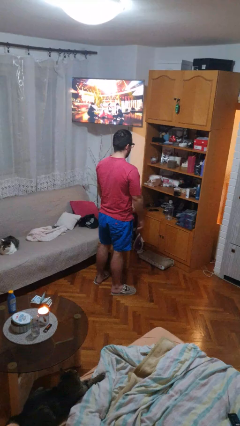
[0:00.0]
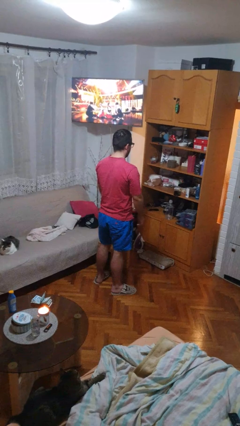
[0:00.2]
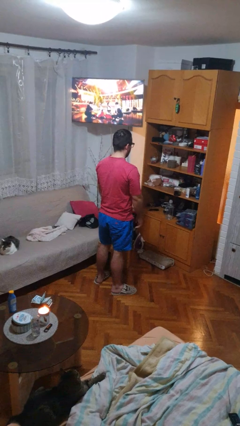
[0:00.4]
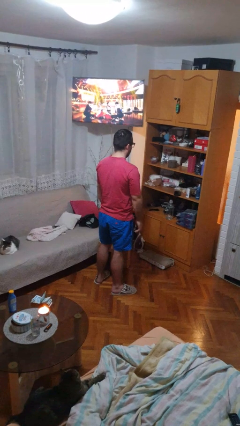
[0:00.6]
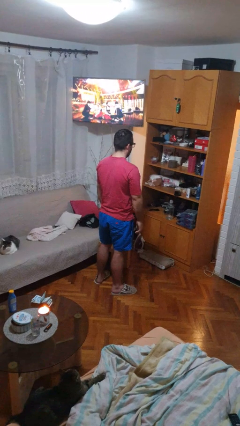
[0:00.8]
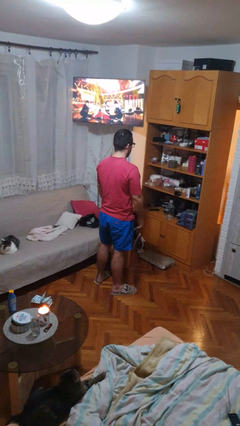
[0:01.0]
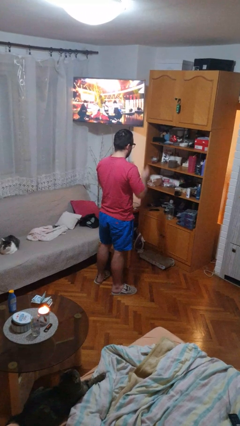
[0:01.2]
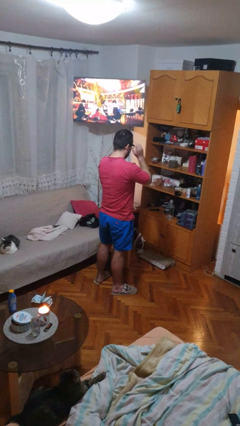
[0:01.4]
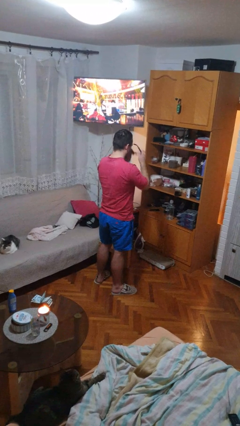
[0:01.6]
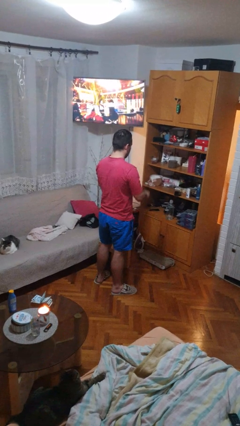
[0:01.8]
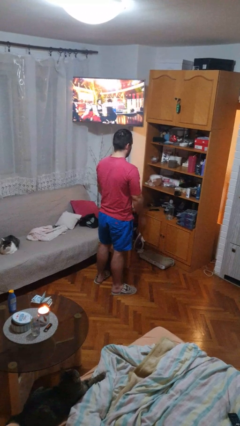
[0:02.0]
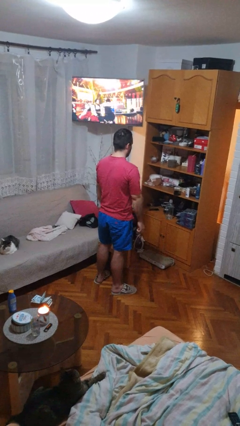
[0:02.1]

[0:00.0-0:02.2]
person takes off glasses

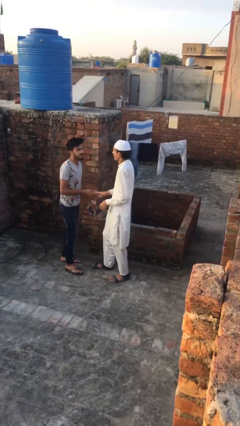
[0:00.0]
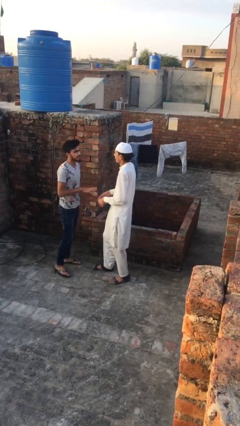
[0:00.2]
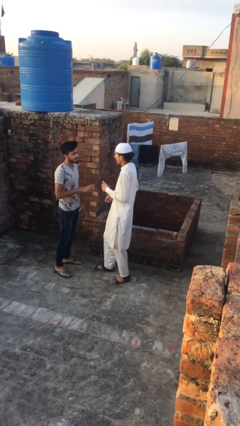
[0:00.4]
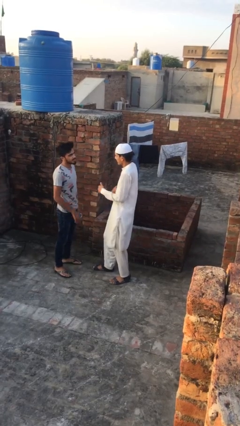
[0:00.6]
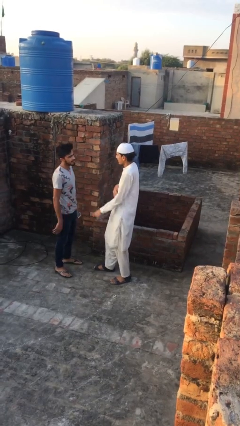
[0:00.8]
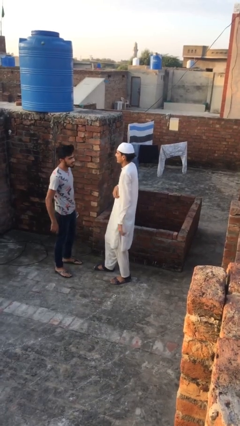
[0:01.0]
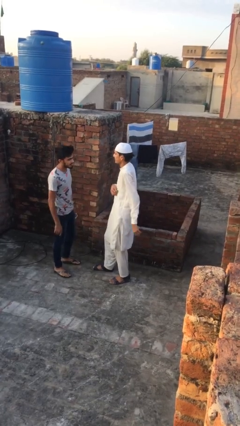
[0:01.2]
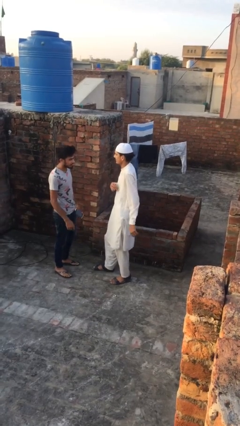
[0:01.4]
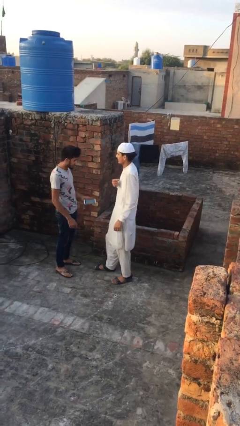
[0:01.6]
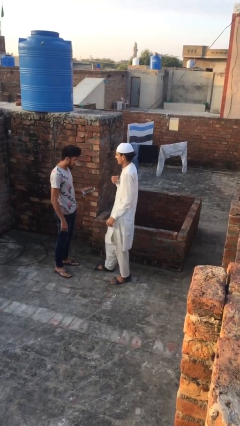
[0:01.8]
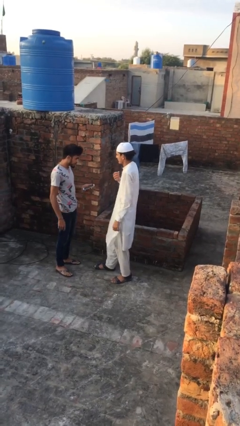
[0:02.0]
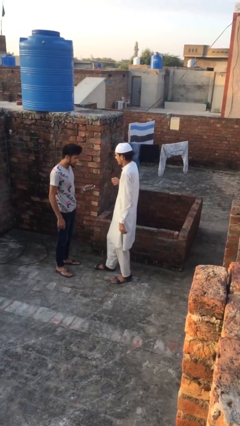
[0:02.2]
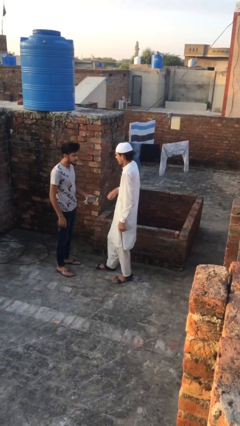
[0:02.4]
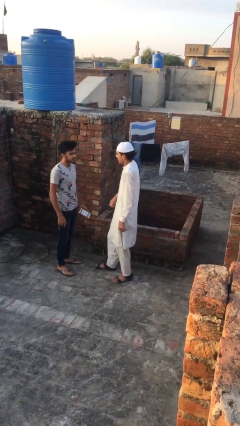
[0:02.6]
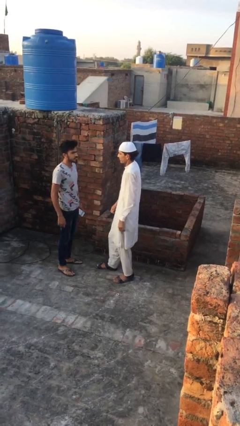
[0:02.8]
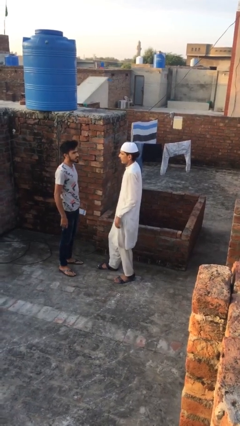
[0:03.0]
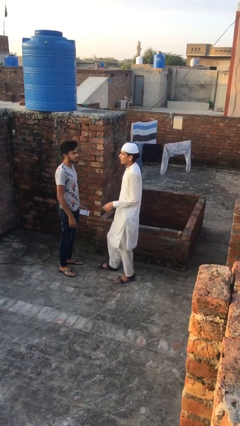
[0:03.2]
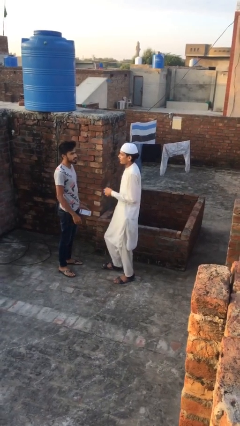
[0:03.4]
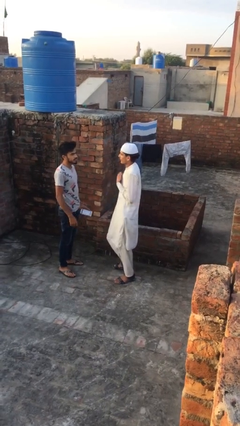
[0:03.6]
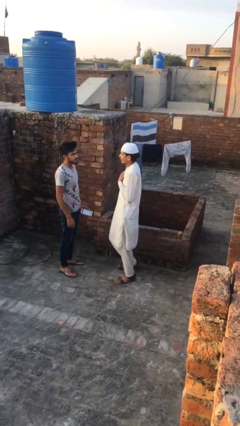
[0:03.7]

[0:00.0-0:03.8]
person talks to person

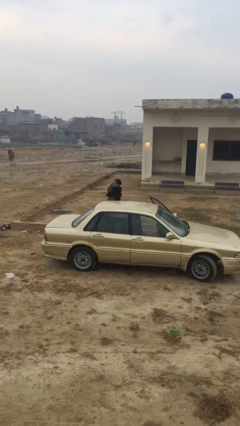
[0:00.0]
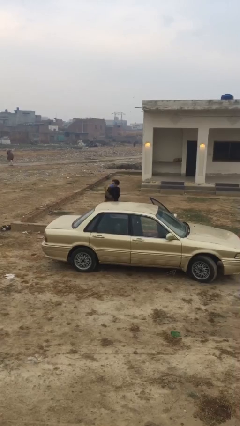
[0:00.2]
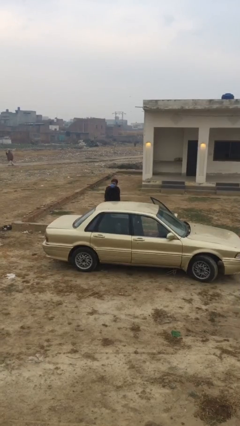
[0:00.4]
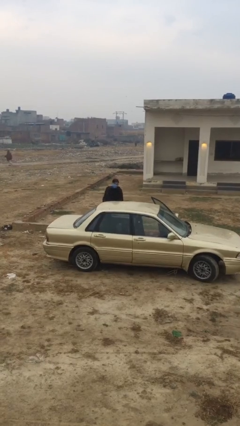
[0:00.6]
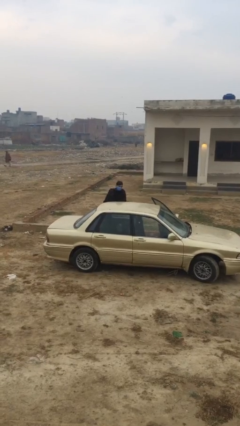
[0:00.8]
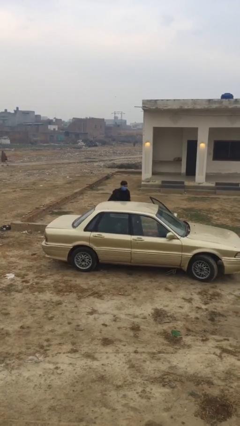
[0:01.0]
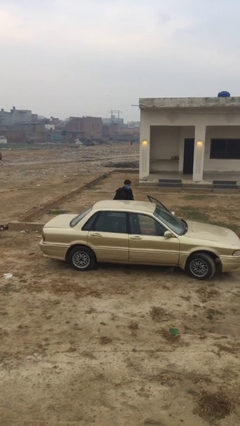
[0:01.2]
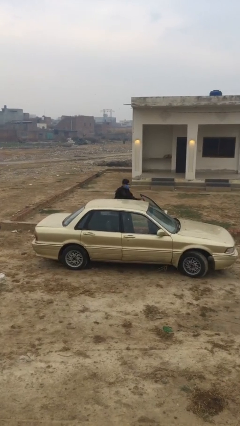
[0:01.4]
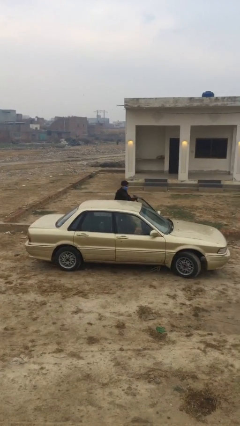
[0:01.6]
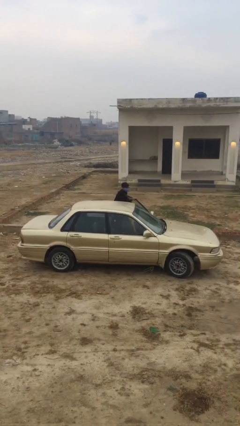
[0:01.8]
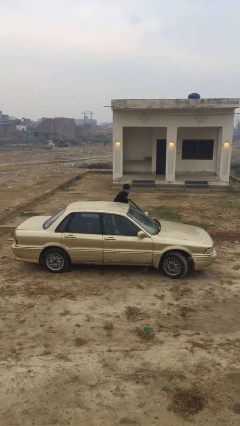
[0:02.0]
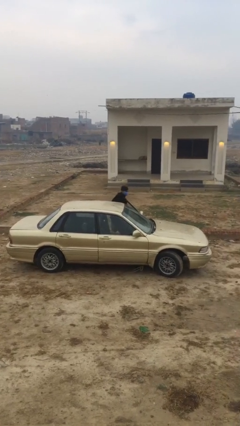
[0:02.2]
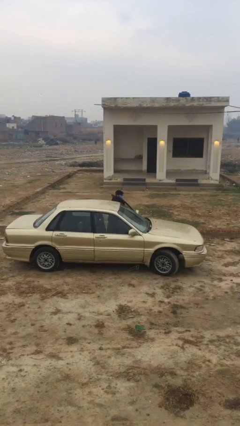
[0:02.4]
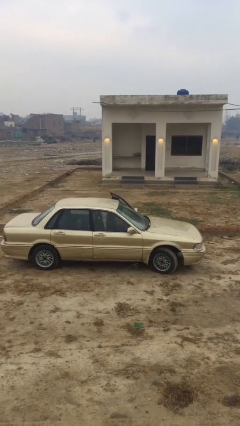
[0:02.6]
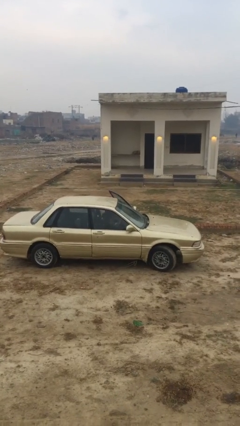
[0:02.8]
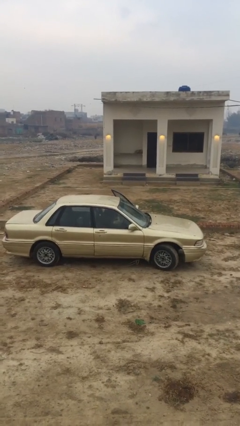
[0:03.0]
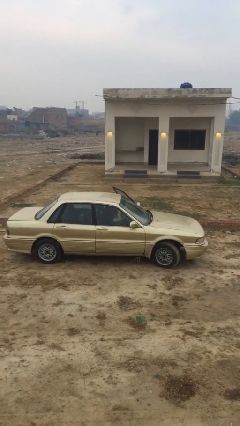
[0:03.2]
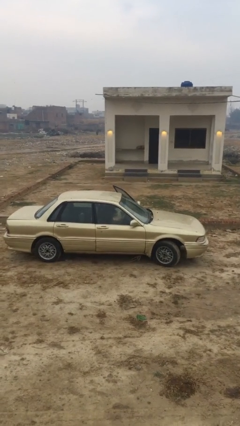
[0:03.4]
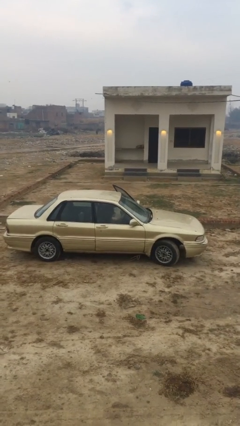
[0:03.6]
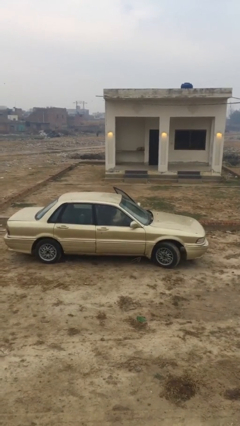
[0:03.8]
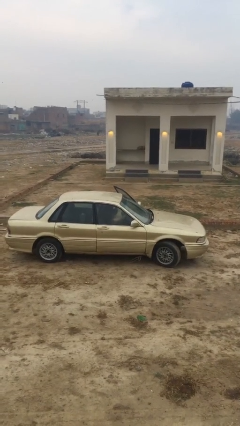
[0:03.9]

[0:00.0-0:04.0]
person enters car

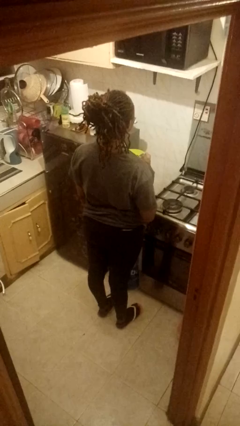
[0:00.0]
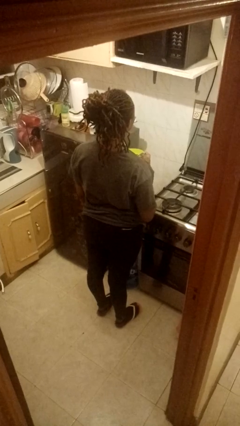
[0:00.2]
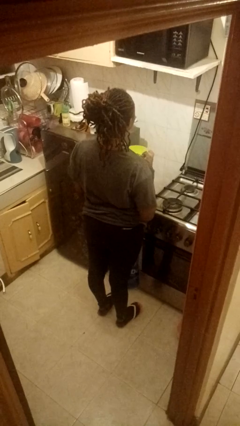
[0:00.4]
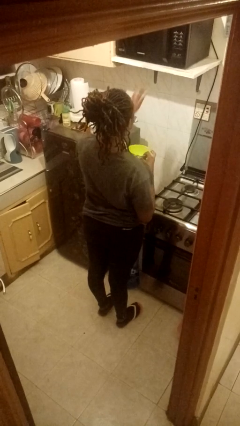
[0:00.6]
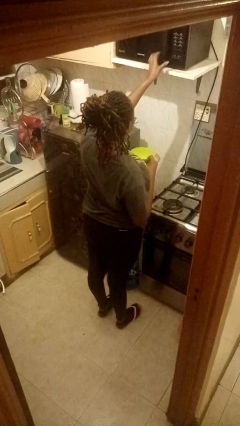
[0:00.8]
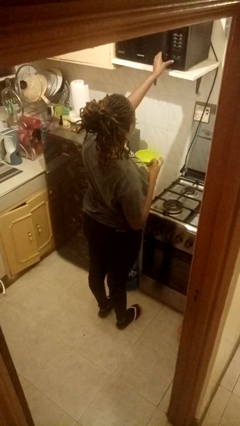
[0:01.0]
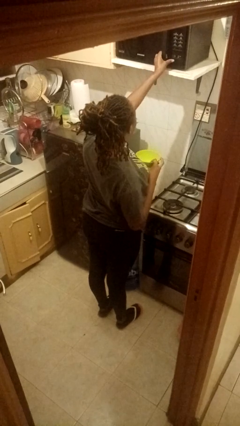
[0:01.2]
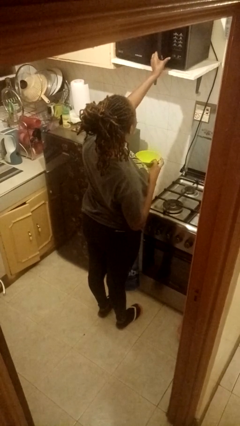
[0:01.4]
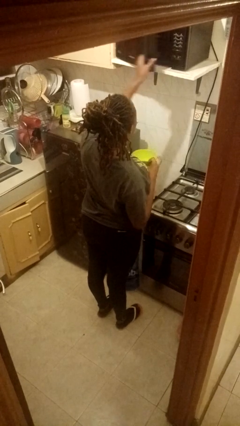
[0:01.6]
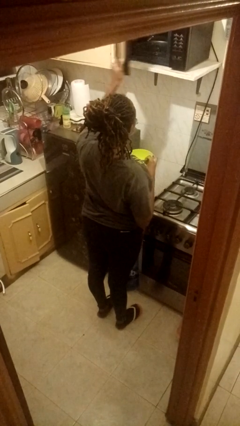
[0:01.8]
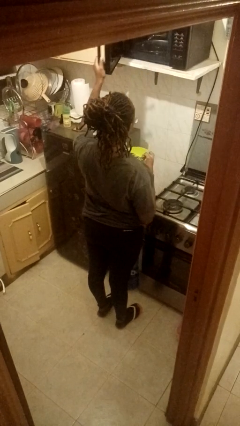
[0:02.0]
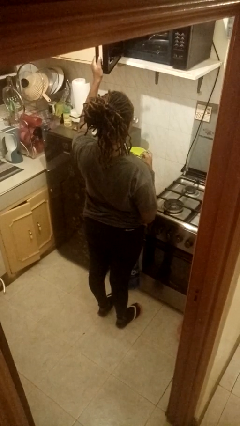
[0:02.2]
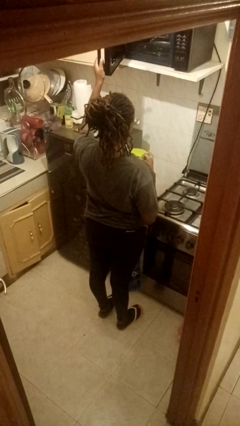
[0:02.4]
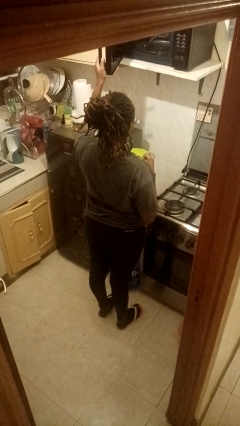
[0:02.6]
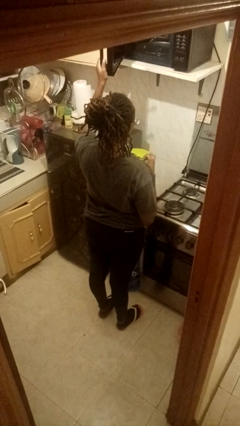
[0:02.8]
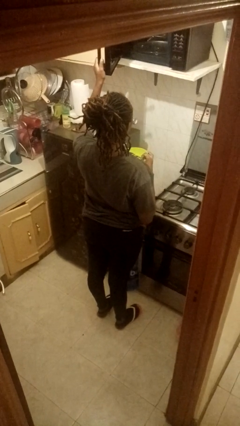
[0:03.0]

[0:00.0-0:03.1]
person opens microwave

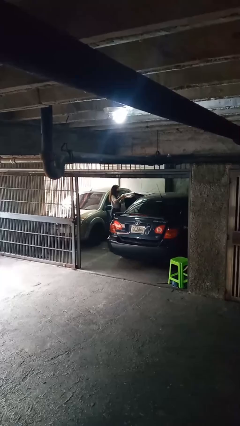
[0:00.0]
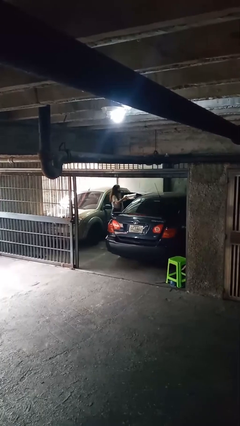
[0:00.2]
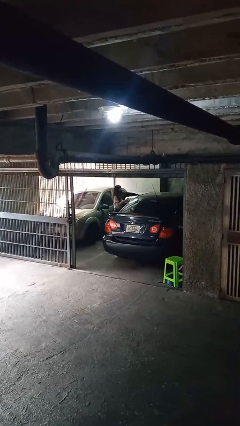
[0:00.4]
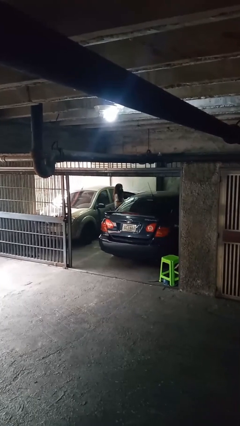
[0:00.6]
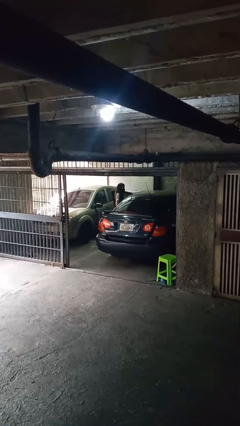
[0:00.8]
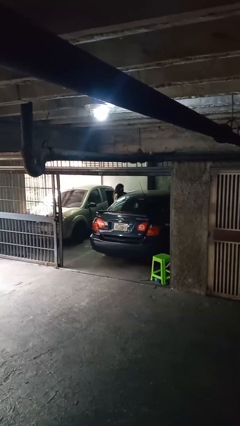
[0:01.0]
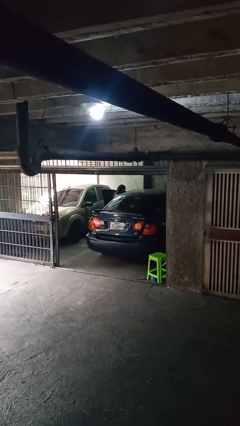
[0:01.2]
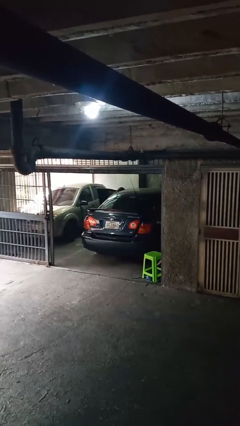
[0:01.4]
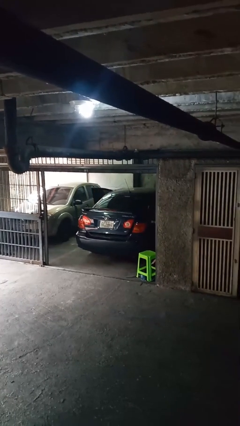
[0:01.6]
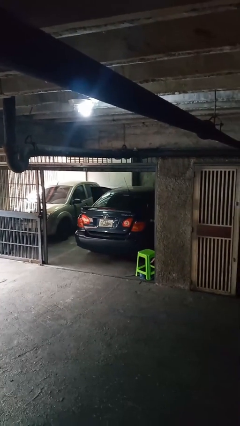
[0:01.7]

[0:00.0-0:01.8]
person loads car

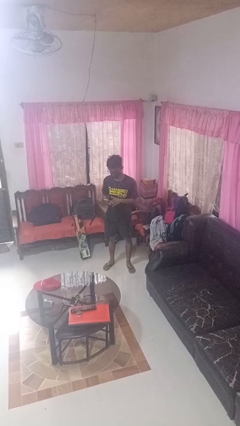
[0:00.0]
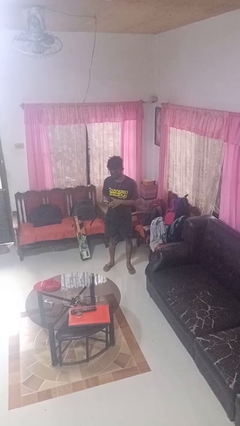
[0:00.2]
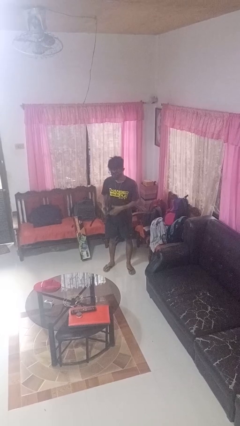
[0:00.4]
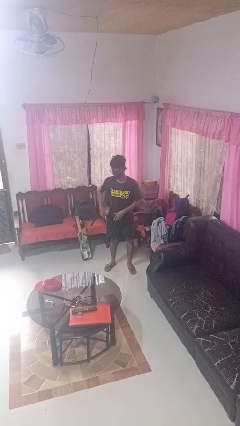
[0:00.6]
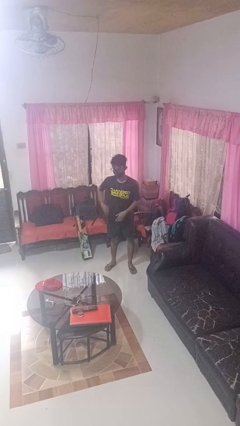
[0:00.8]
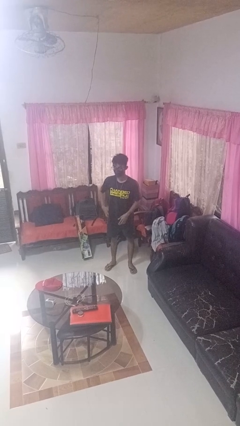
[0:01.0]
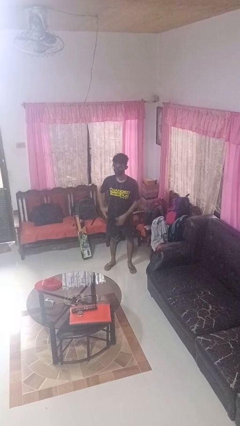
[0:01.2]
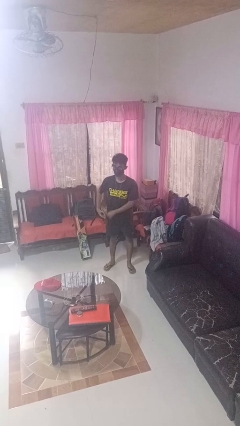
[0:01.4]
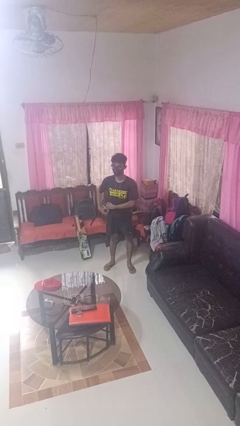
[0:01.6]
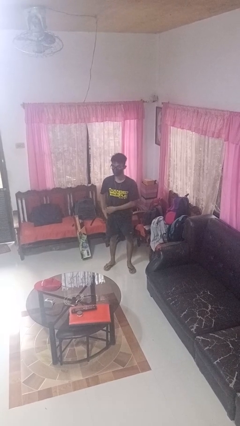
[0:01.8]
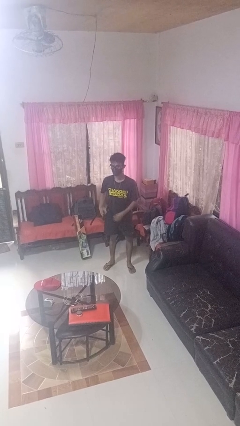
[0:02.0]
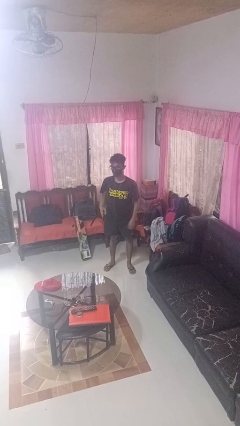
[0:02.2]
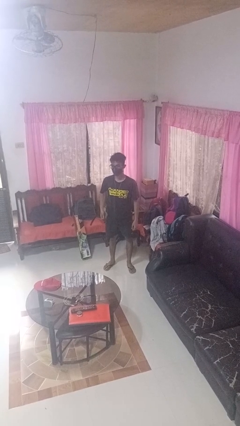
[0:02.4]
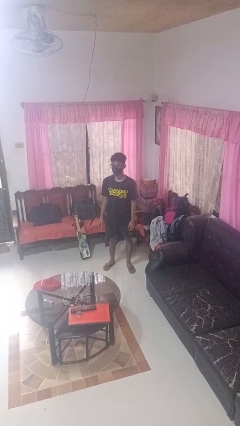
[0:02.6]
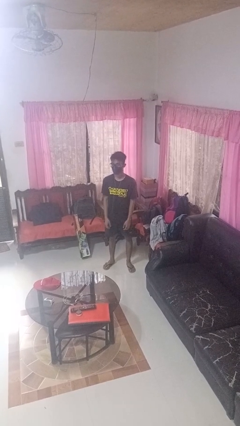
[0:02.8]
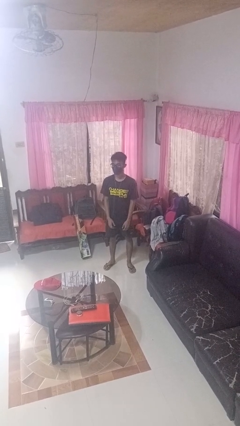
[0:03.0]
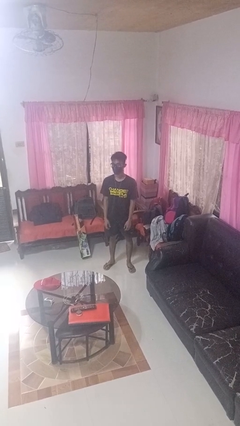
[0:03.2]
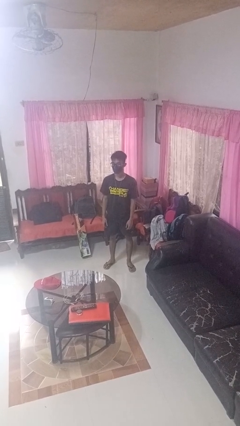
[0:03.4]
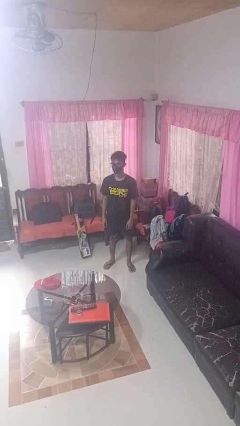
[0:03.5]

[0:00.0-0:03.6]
person puts phone into pocket
